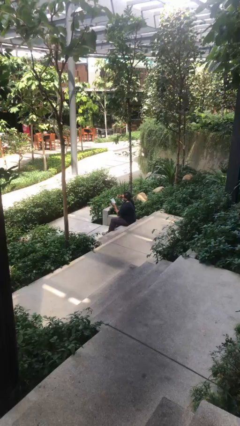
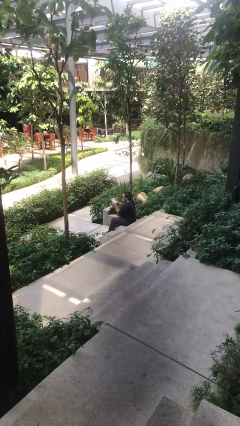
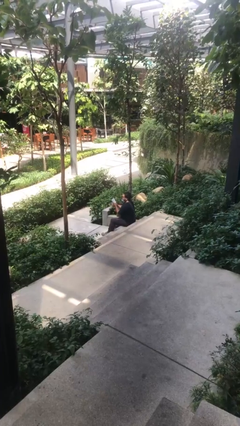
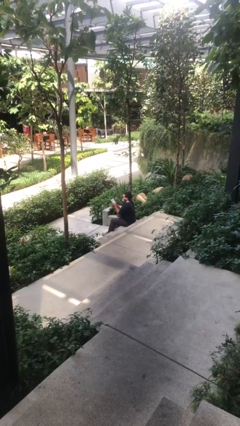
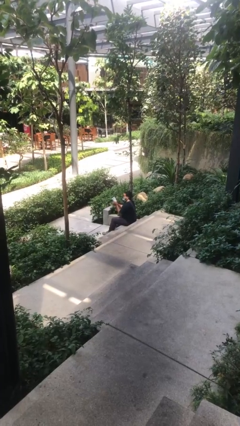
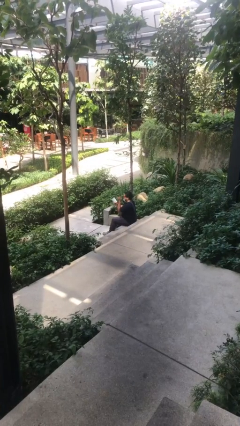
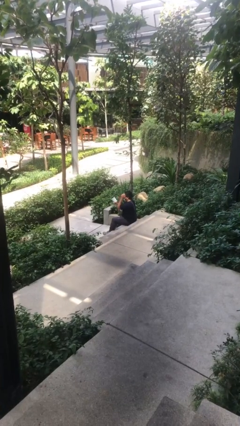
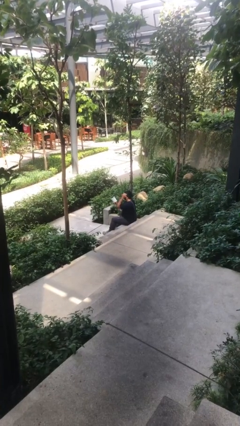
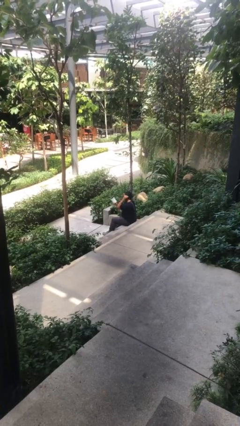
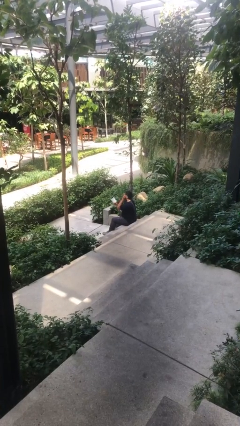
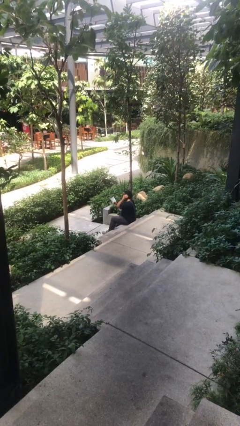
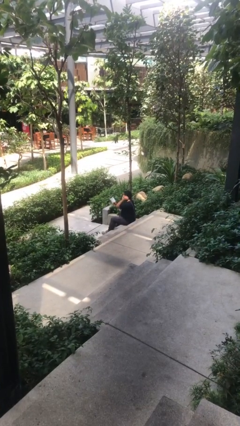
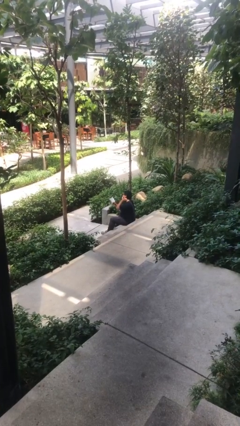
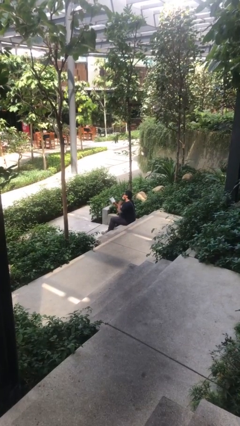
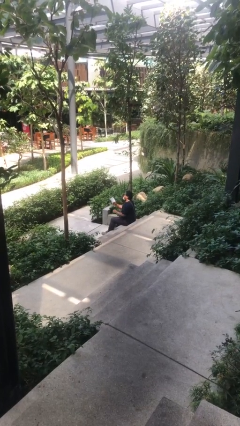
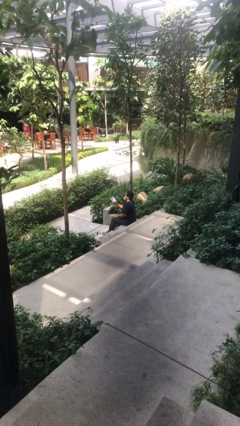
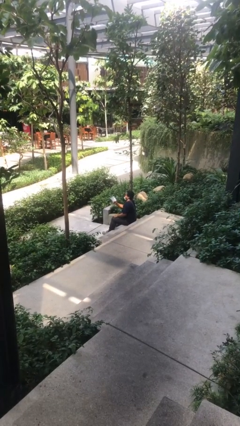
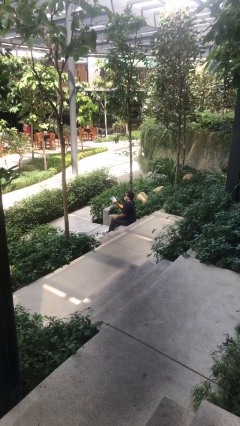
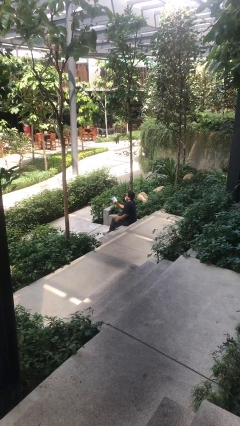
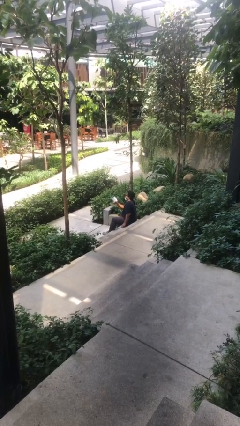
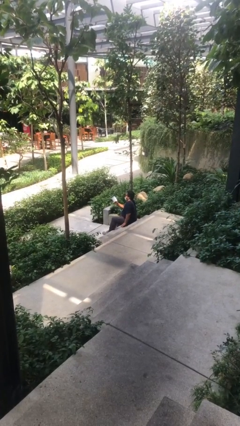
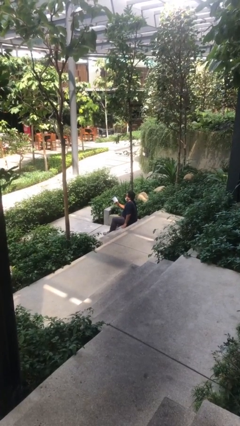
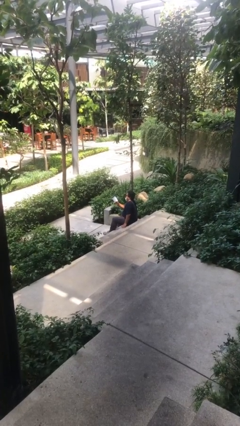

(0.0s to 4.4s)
person reads document

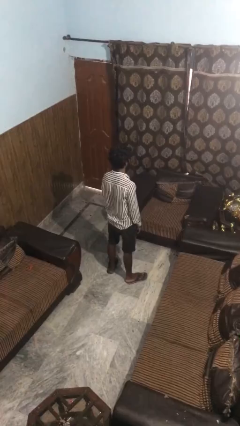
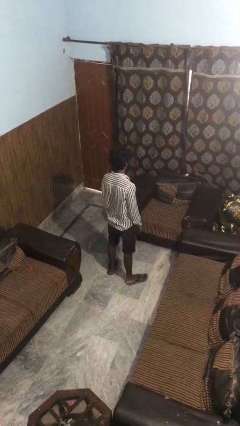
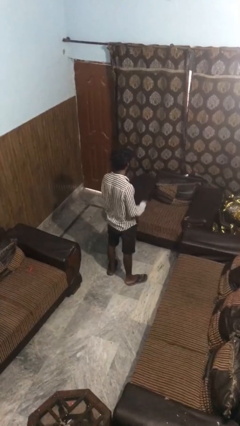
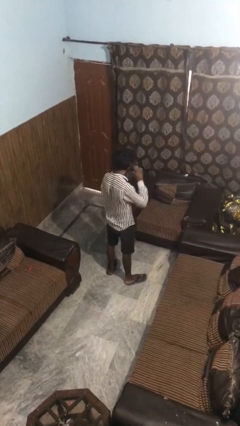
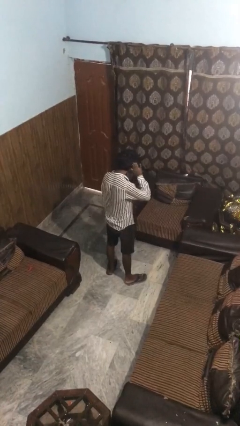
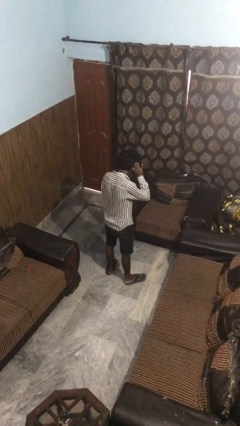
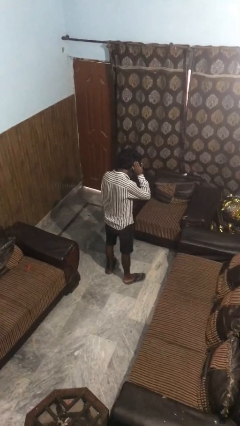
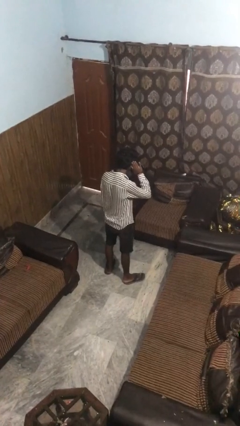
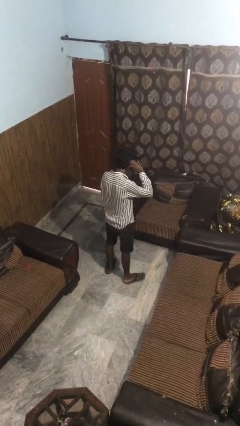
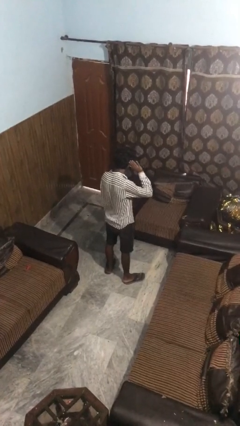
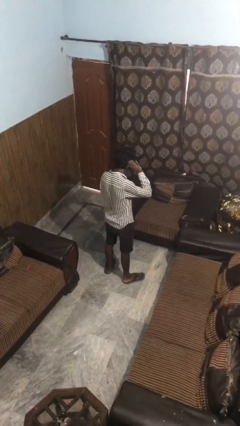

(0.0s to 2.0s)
person gestures listen closely

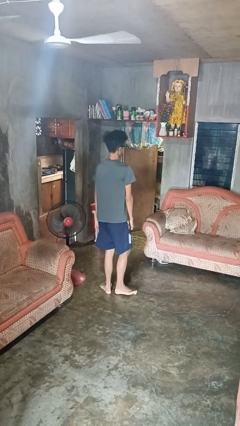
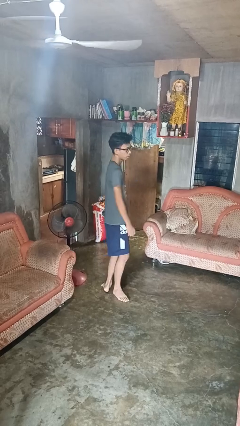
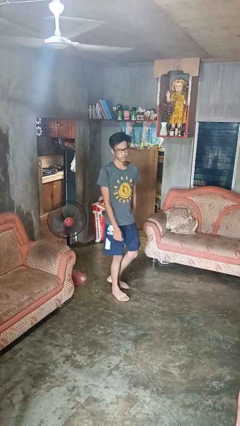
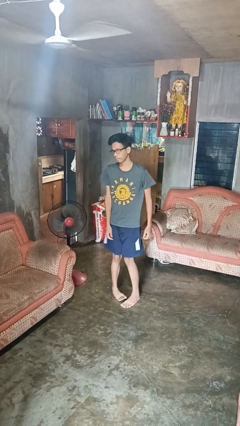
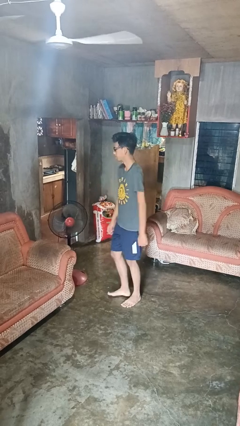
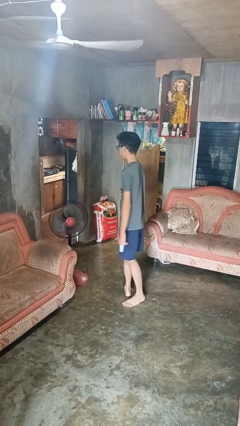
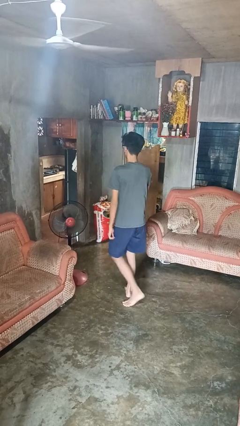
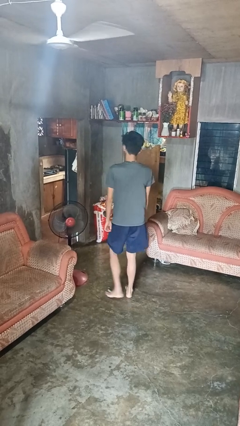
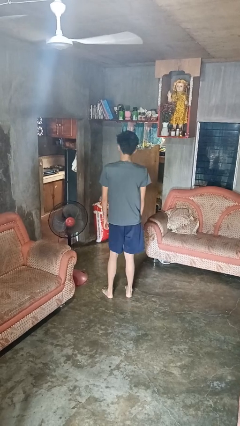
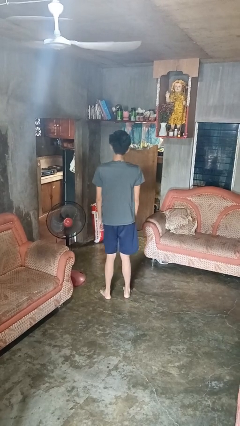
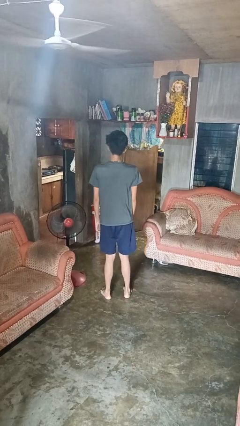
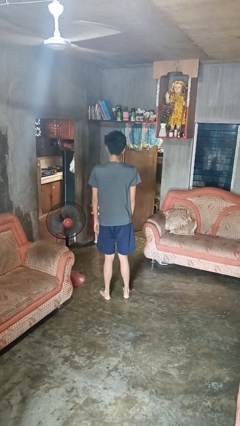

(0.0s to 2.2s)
person twirls

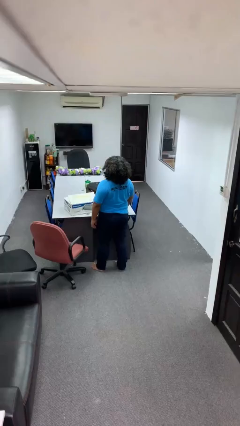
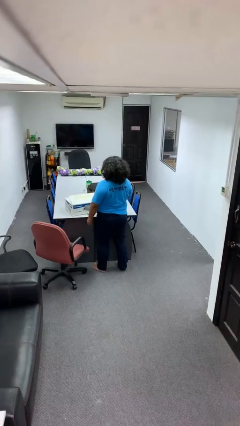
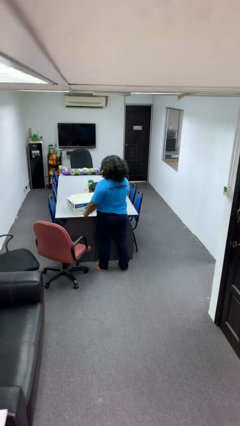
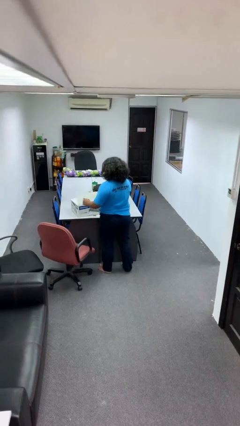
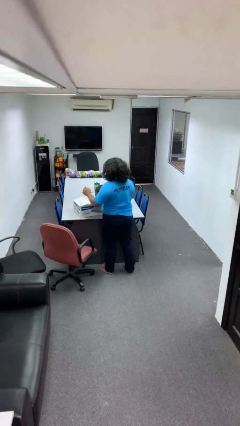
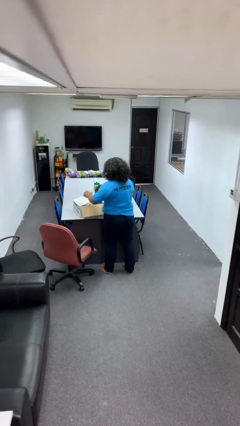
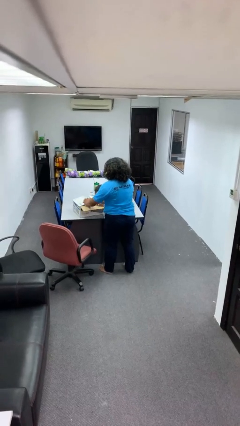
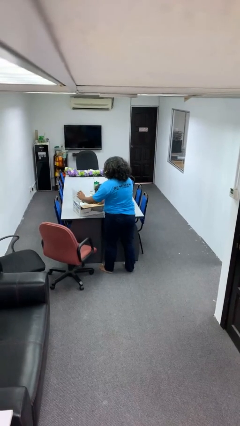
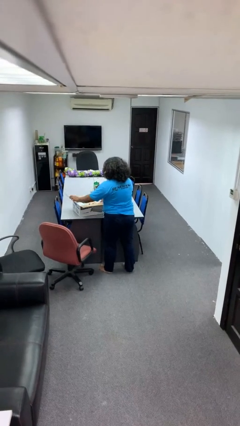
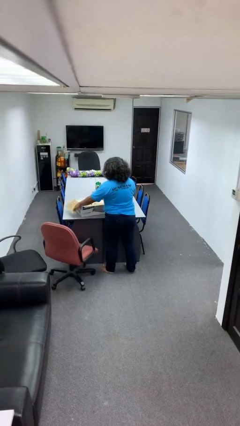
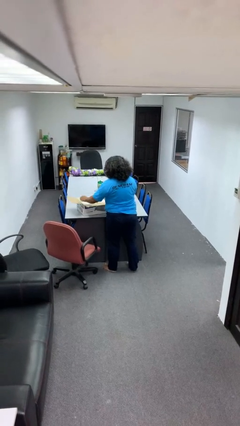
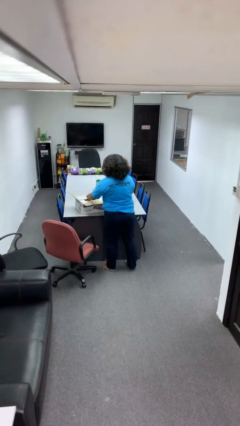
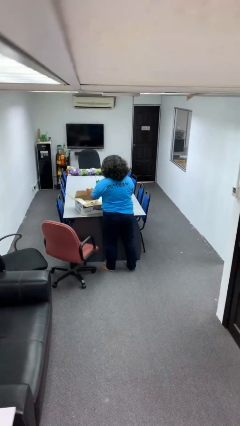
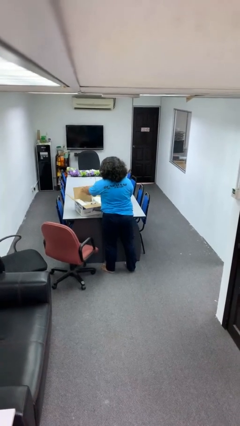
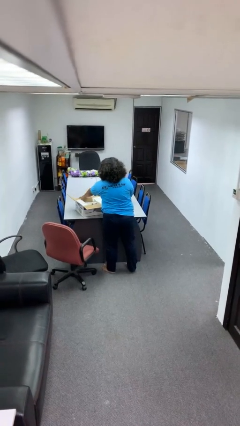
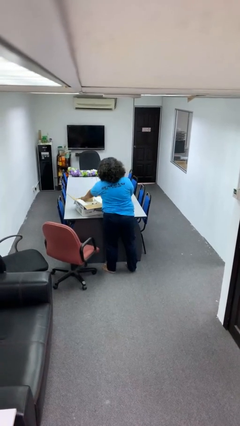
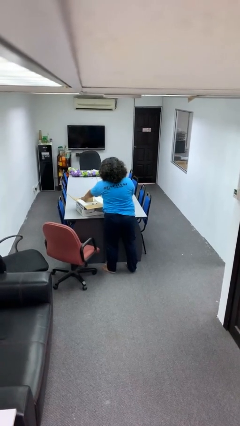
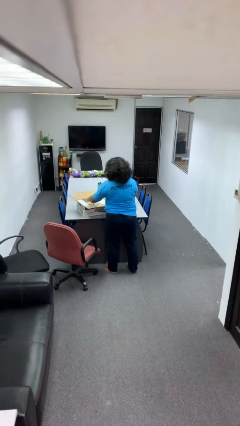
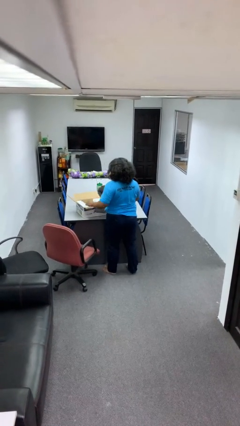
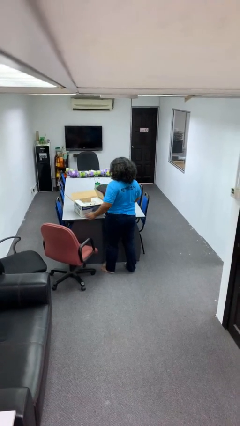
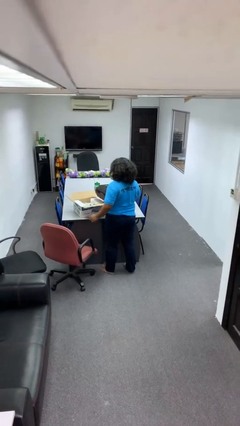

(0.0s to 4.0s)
person opens box

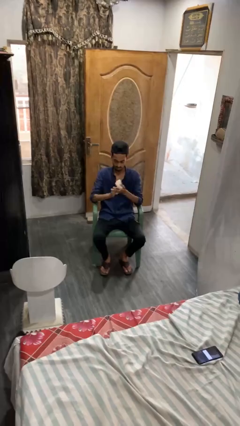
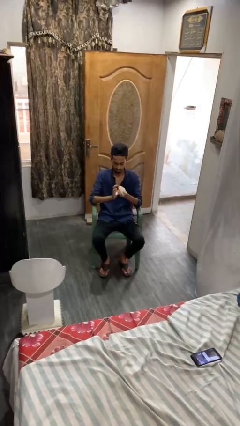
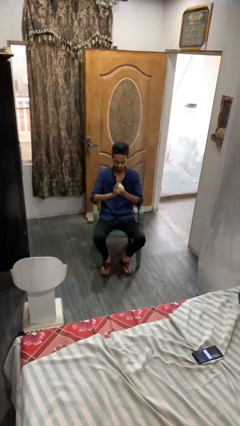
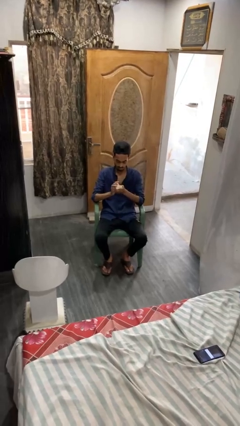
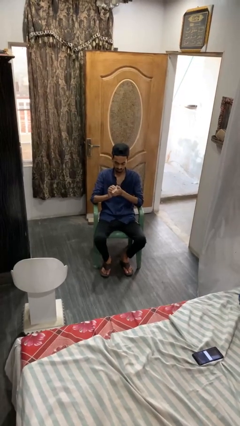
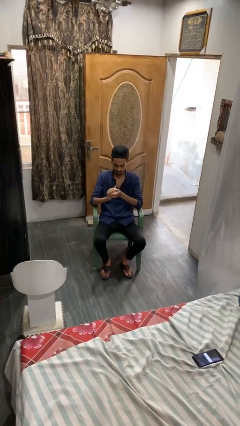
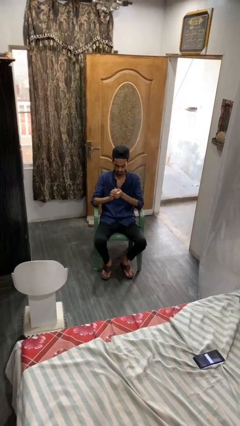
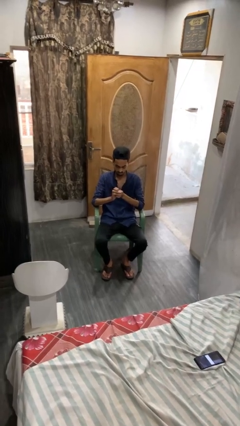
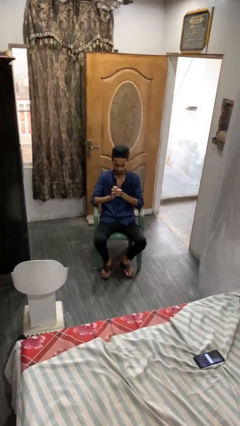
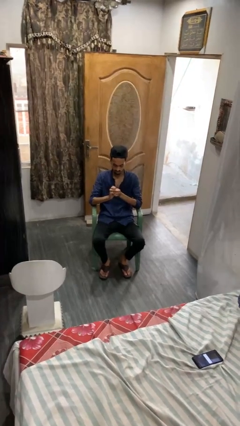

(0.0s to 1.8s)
person crumples paper

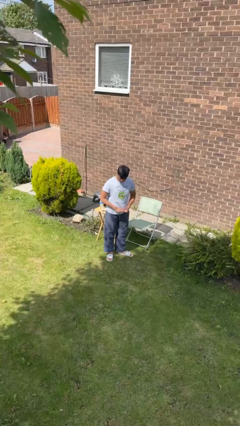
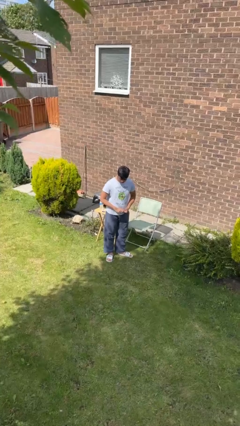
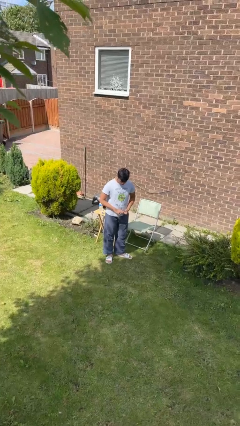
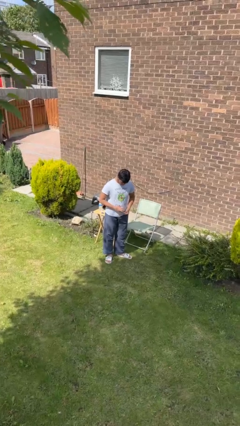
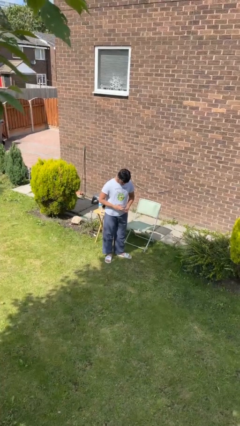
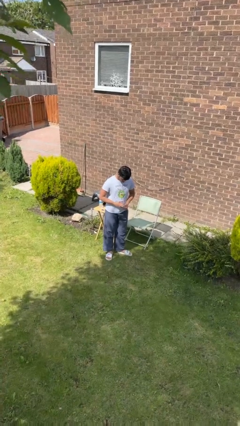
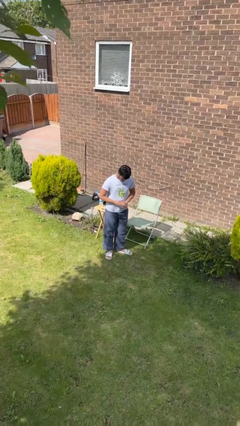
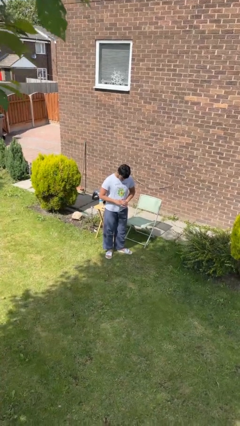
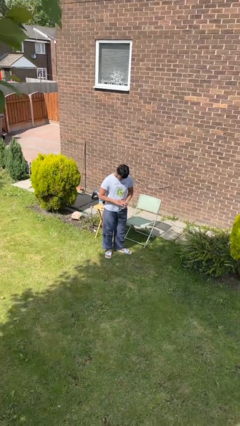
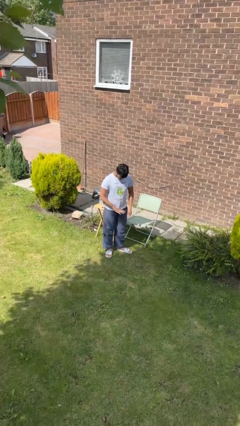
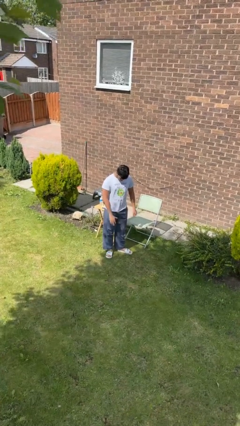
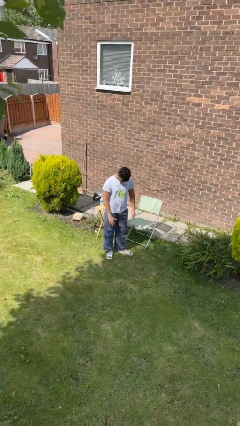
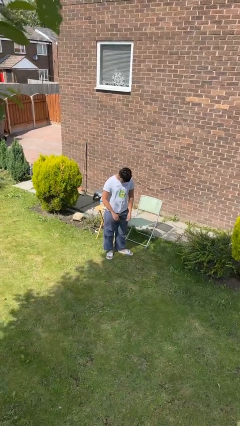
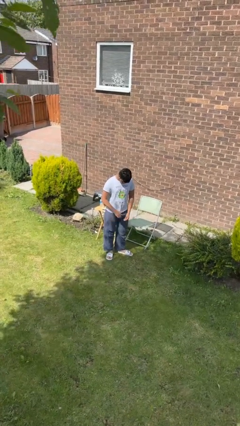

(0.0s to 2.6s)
person puts on ring

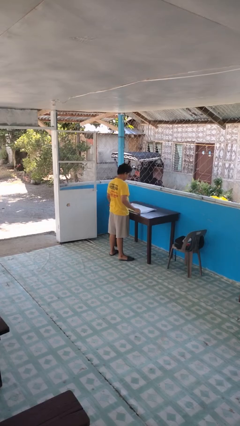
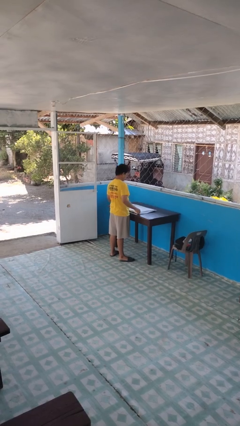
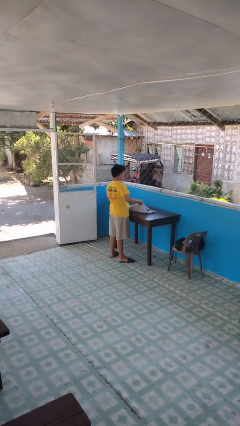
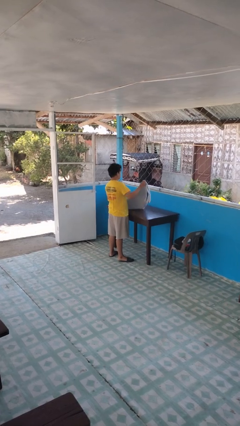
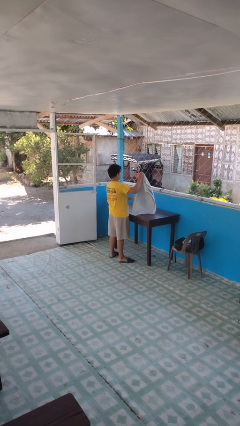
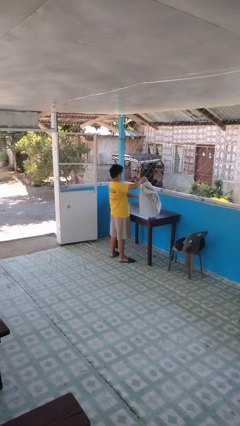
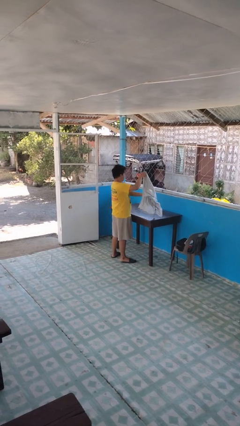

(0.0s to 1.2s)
person unfolds blanket
